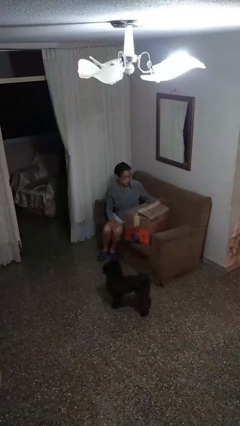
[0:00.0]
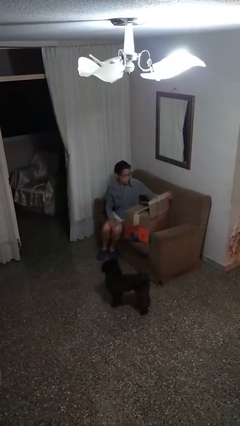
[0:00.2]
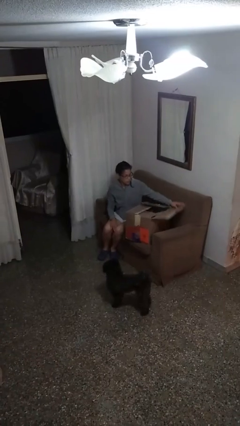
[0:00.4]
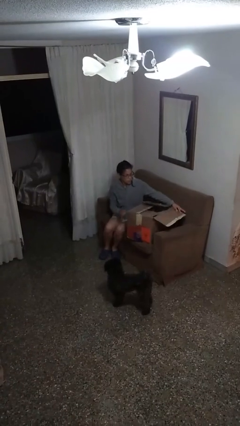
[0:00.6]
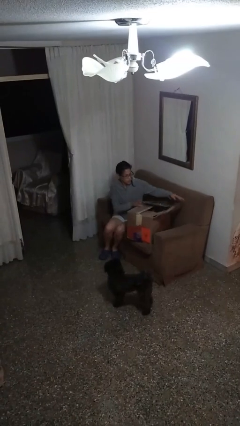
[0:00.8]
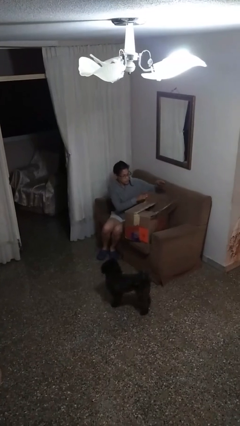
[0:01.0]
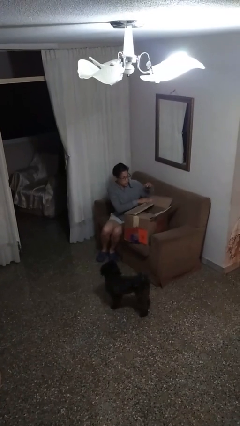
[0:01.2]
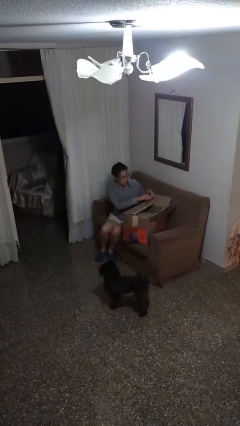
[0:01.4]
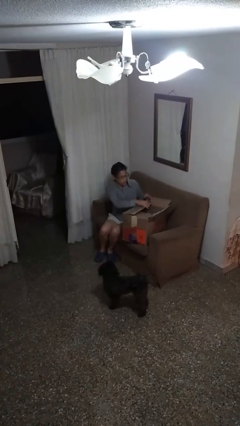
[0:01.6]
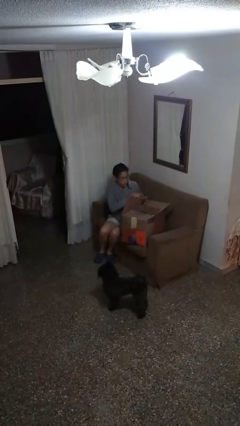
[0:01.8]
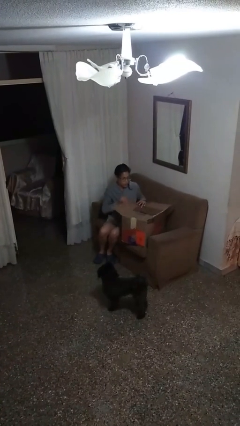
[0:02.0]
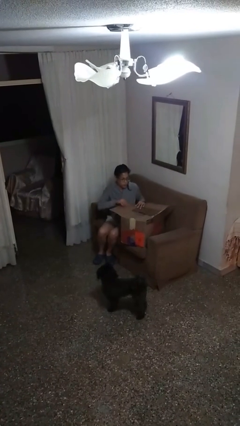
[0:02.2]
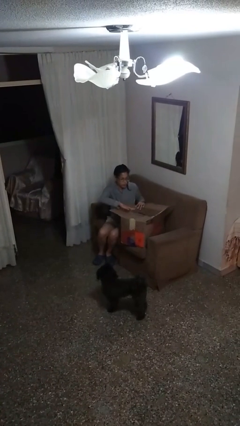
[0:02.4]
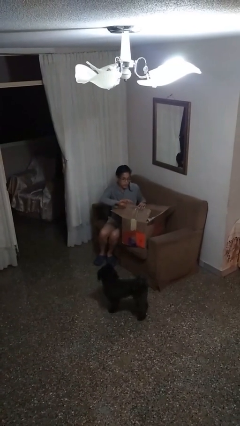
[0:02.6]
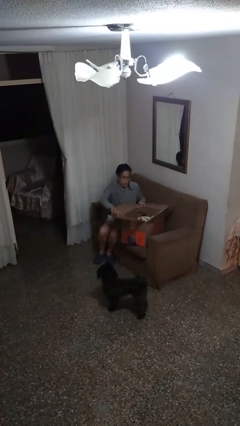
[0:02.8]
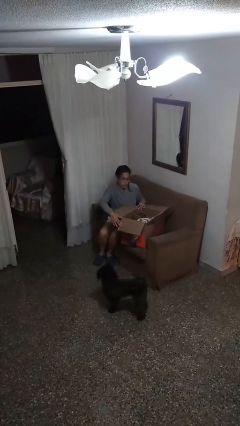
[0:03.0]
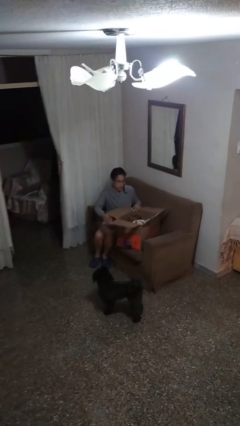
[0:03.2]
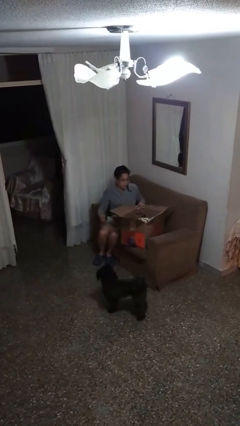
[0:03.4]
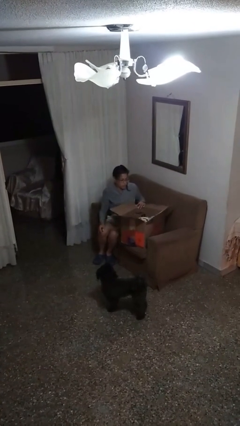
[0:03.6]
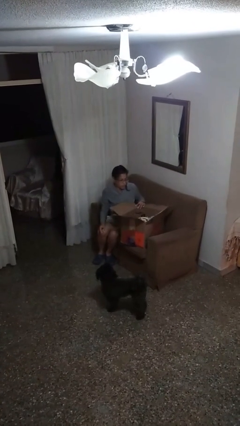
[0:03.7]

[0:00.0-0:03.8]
person opens box

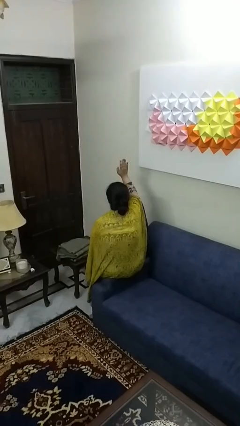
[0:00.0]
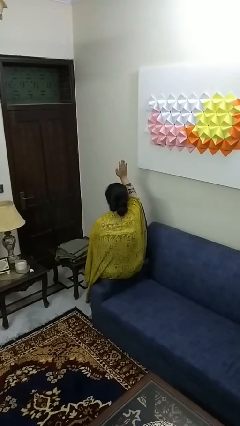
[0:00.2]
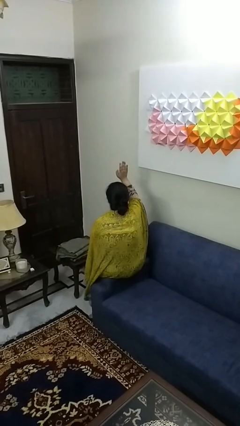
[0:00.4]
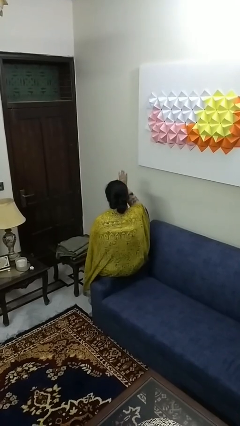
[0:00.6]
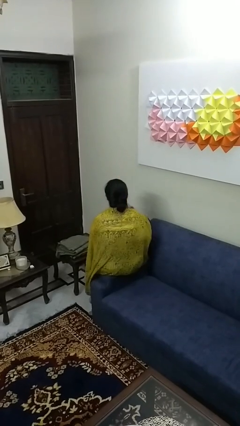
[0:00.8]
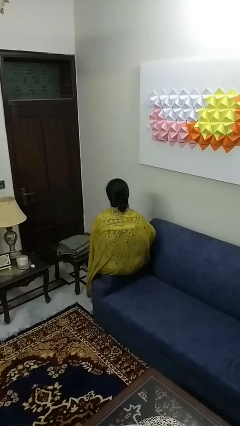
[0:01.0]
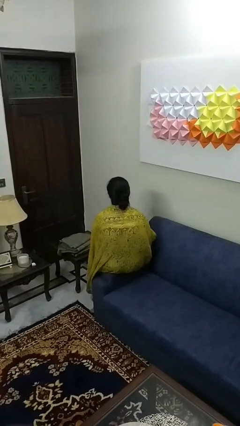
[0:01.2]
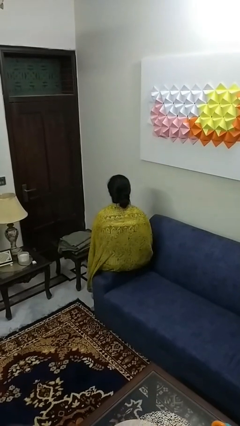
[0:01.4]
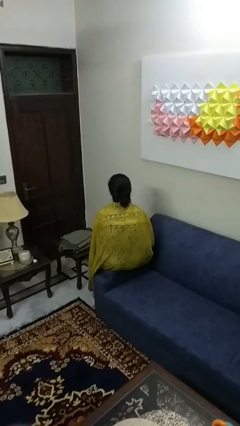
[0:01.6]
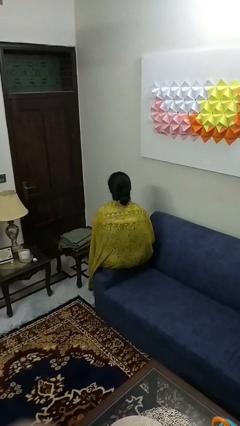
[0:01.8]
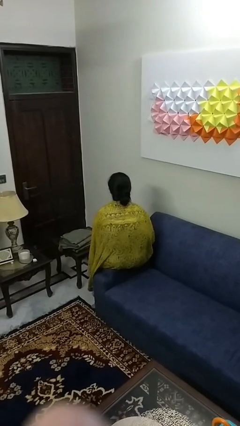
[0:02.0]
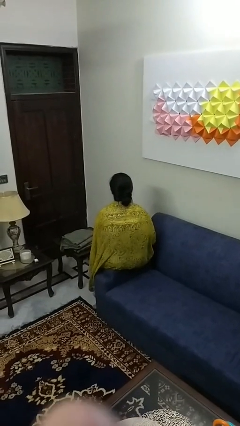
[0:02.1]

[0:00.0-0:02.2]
person gestures lower hand

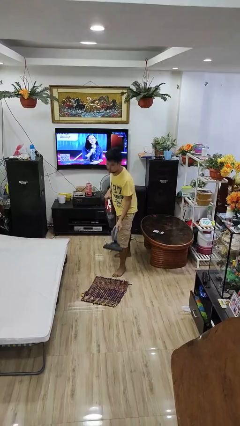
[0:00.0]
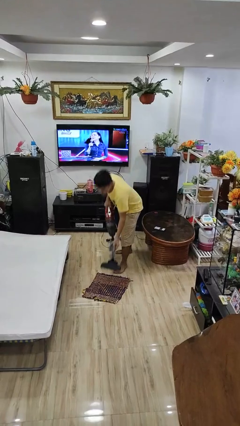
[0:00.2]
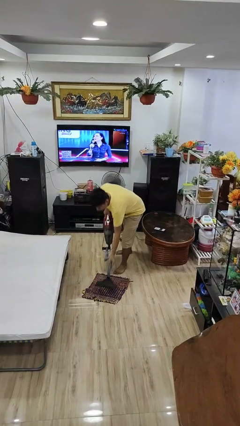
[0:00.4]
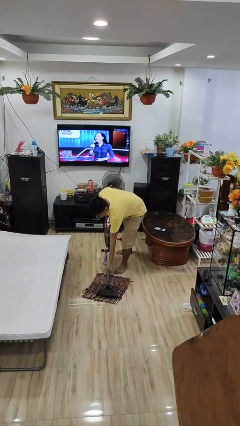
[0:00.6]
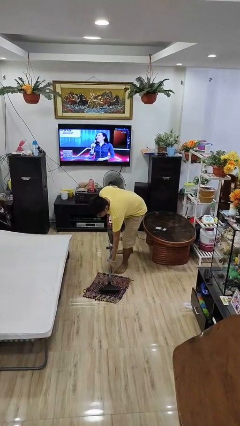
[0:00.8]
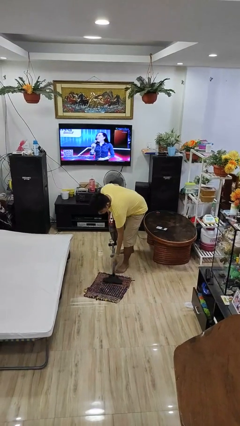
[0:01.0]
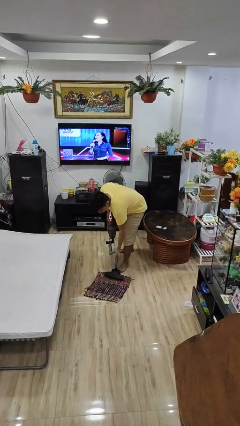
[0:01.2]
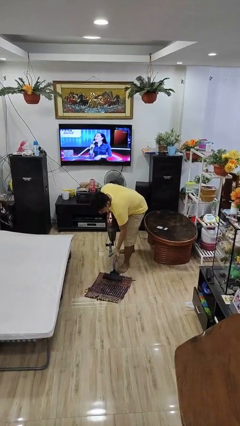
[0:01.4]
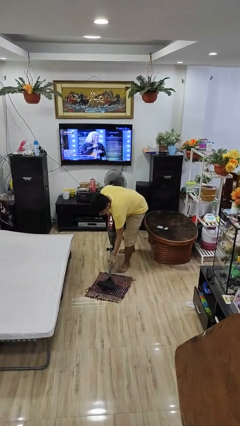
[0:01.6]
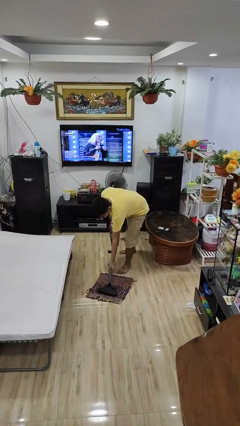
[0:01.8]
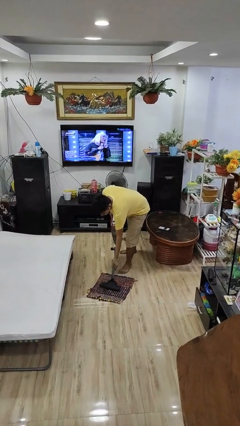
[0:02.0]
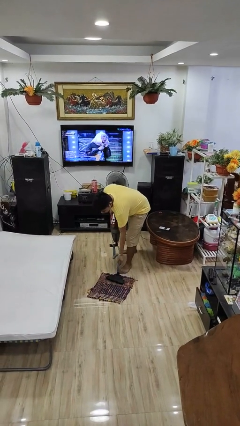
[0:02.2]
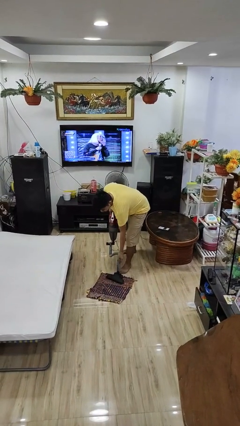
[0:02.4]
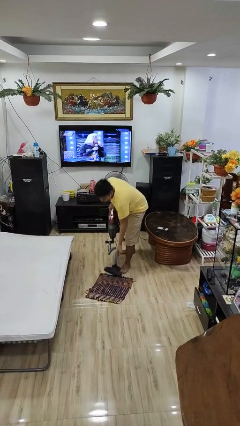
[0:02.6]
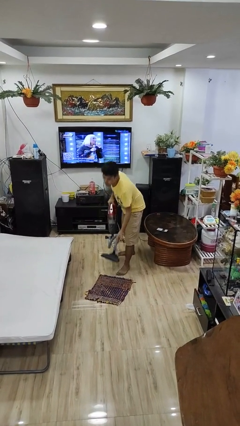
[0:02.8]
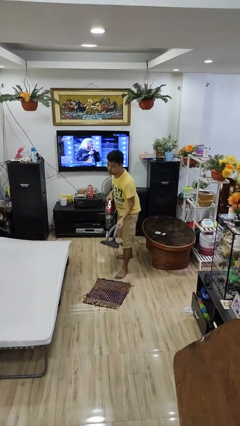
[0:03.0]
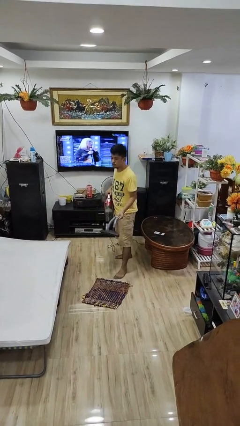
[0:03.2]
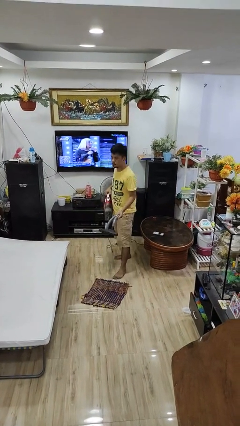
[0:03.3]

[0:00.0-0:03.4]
person vacuums carpet

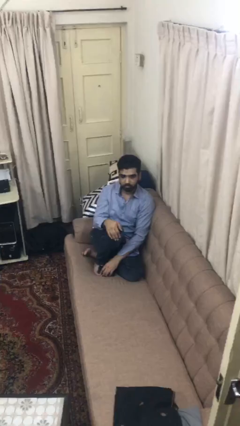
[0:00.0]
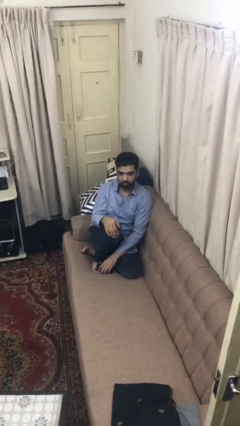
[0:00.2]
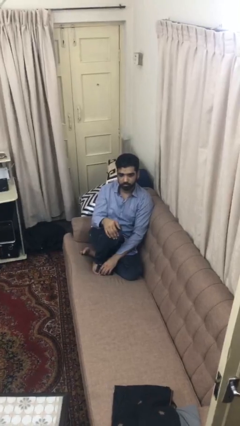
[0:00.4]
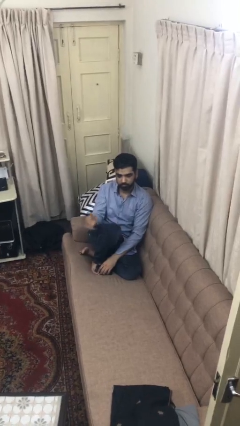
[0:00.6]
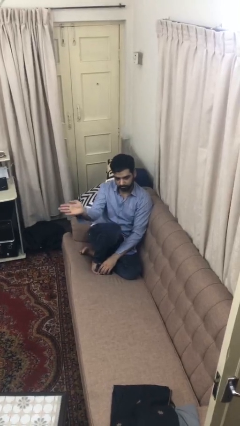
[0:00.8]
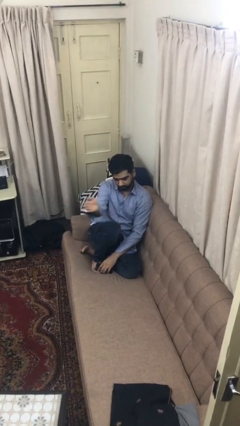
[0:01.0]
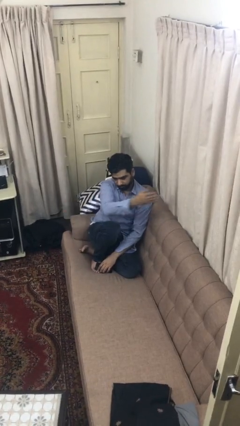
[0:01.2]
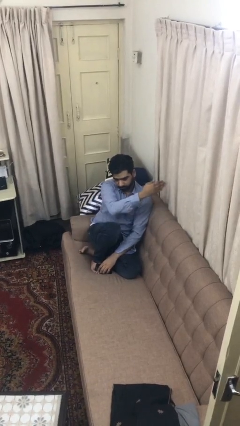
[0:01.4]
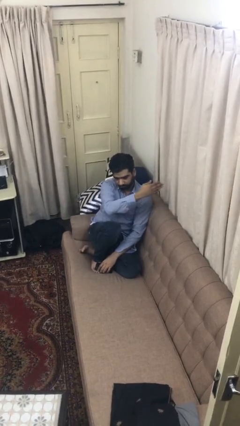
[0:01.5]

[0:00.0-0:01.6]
person gestures swipe left

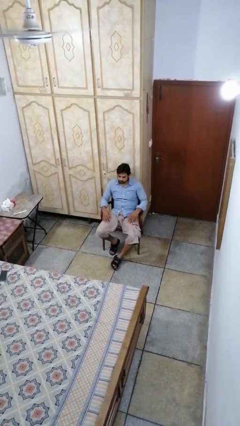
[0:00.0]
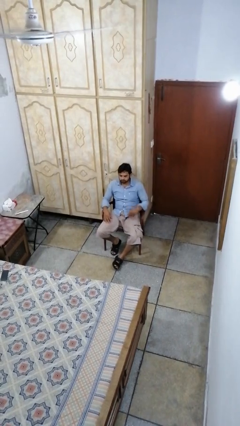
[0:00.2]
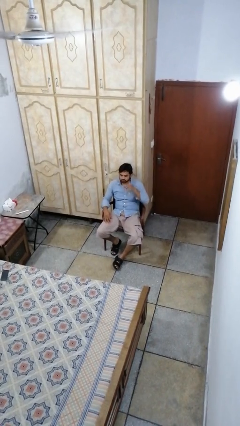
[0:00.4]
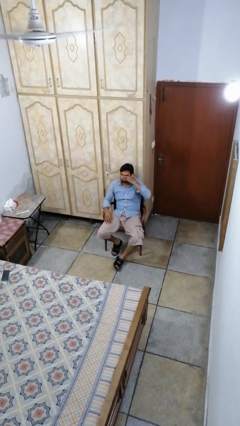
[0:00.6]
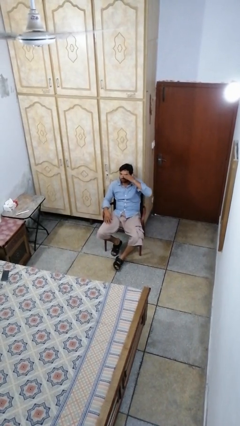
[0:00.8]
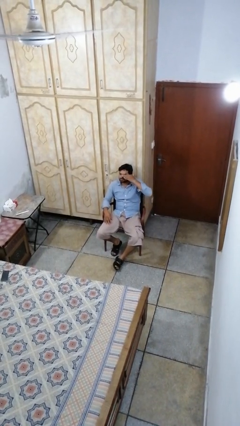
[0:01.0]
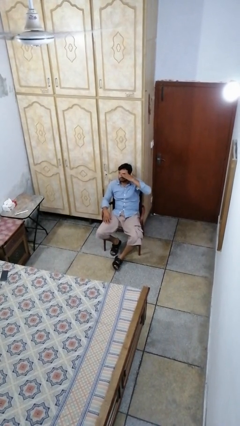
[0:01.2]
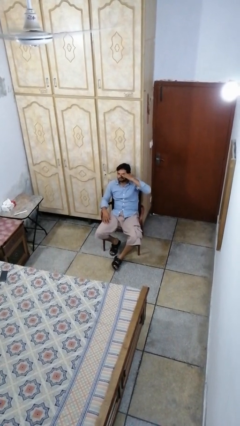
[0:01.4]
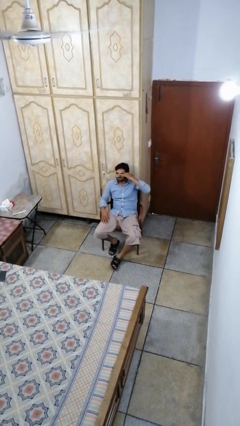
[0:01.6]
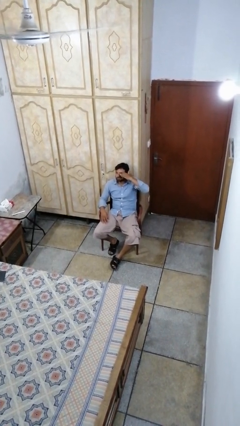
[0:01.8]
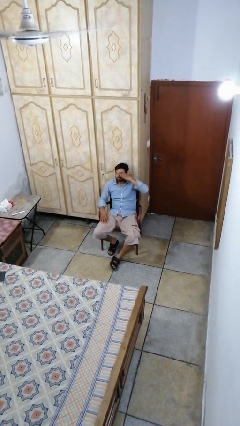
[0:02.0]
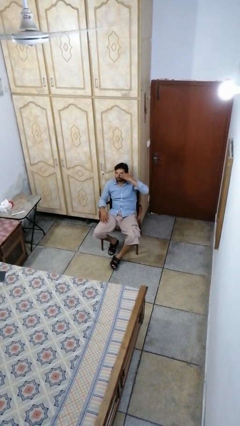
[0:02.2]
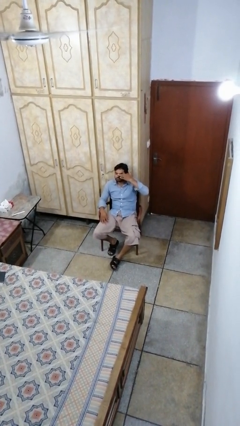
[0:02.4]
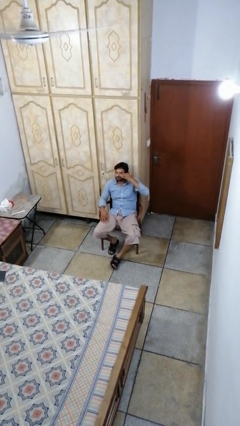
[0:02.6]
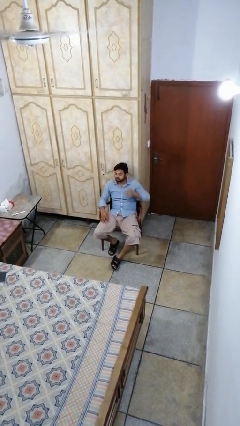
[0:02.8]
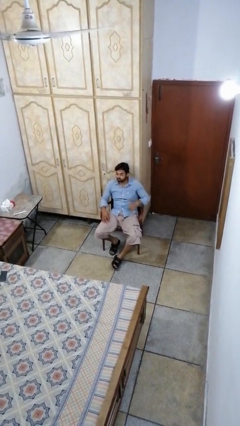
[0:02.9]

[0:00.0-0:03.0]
person rubs eyes

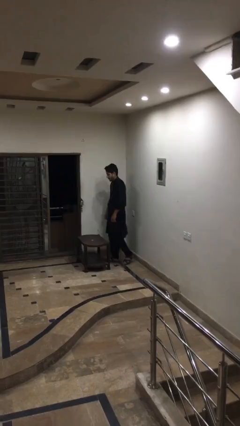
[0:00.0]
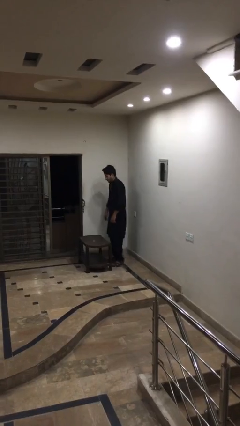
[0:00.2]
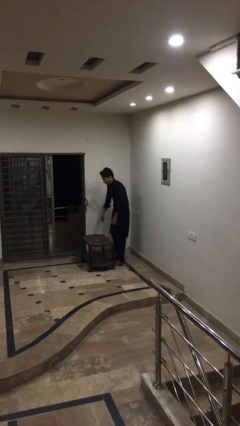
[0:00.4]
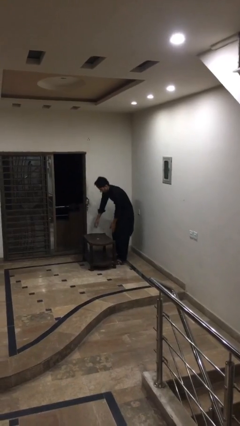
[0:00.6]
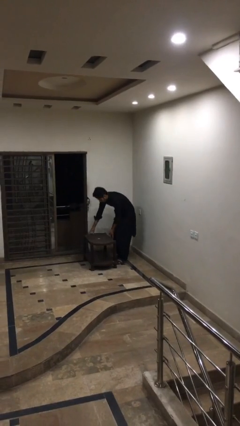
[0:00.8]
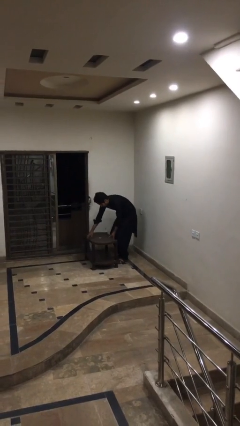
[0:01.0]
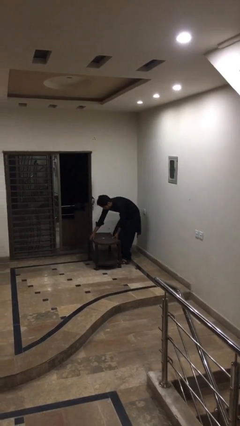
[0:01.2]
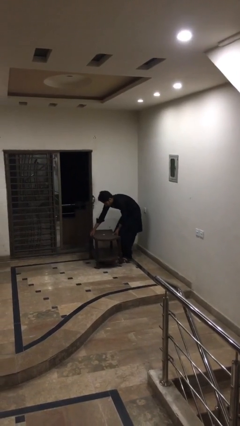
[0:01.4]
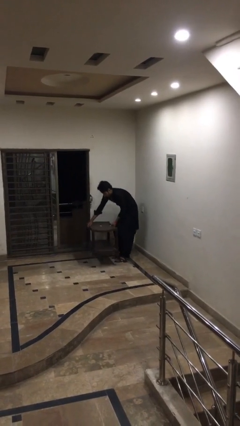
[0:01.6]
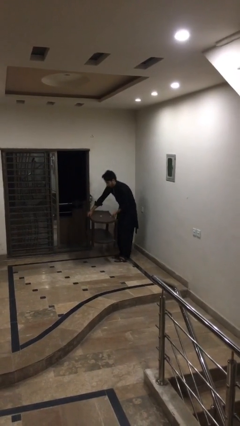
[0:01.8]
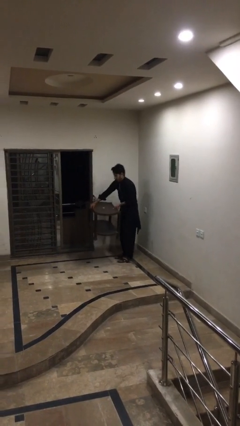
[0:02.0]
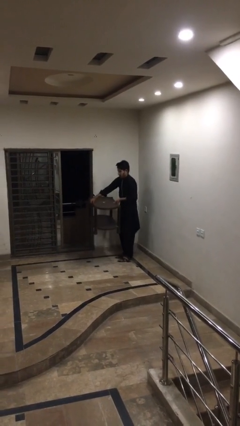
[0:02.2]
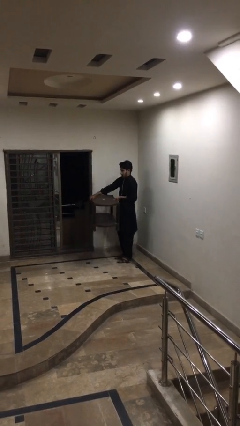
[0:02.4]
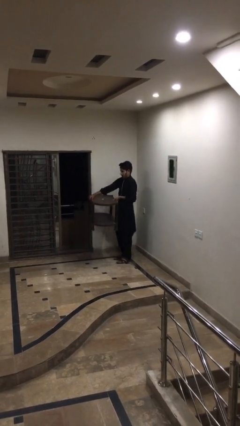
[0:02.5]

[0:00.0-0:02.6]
person picks up object from floor
